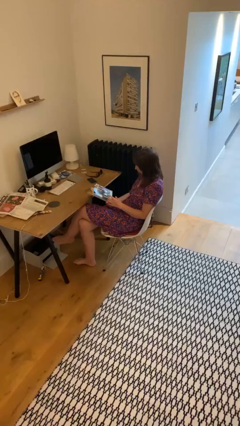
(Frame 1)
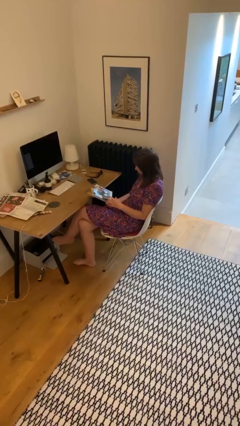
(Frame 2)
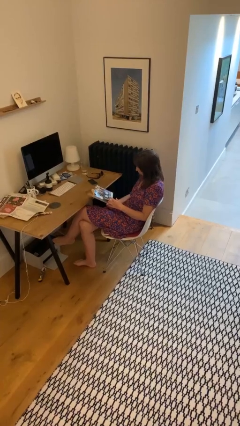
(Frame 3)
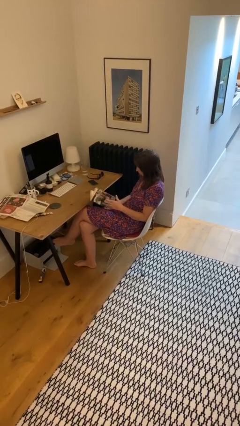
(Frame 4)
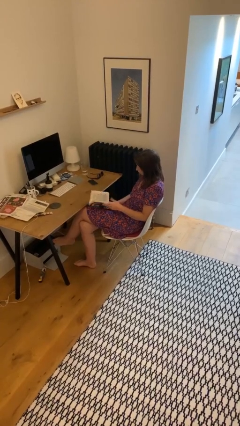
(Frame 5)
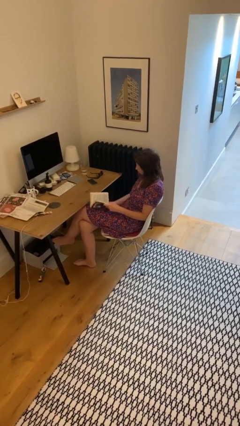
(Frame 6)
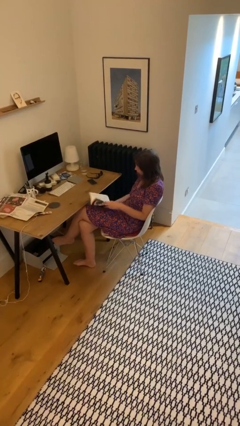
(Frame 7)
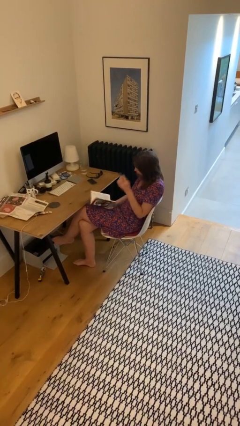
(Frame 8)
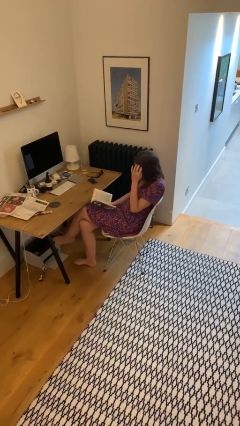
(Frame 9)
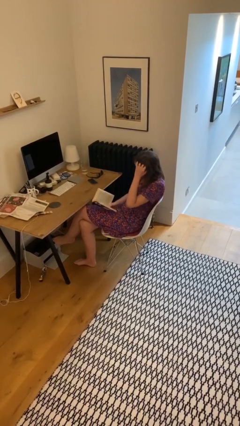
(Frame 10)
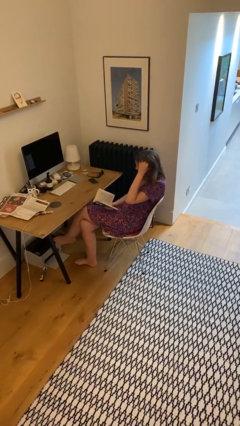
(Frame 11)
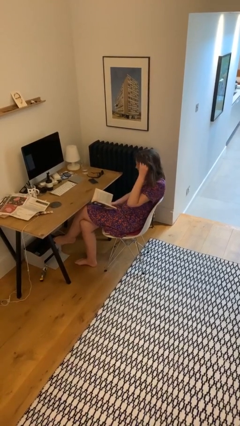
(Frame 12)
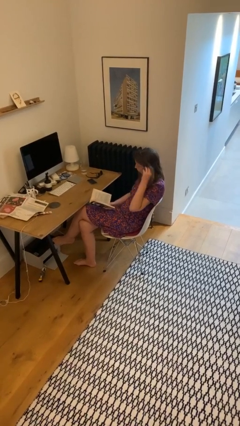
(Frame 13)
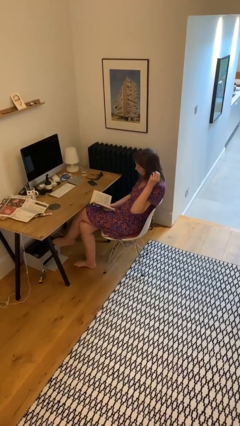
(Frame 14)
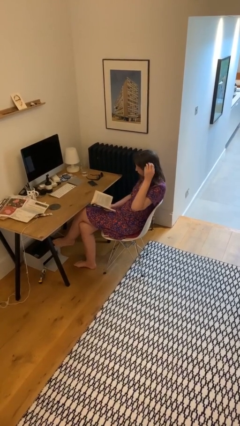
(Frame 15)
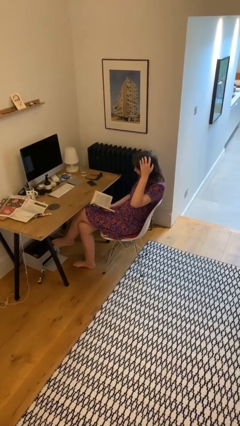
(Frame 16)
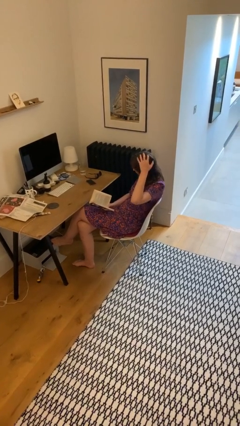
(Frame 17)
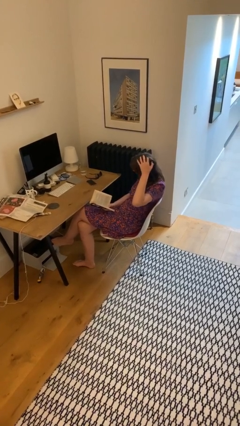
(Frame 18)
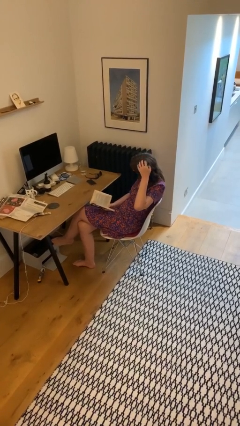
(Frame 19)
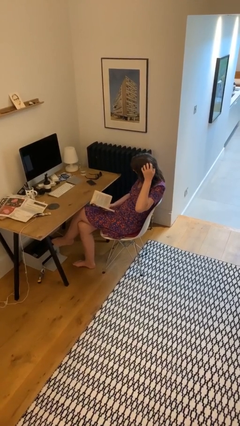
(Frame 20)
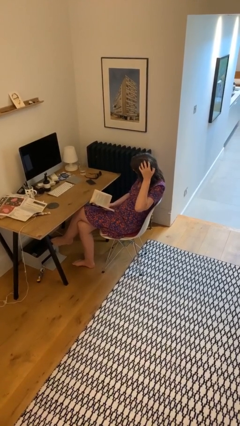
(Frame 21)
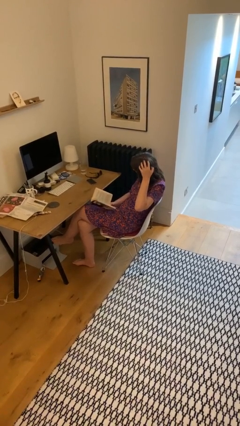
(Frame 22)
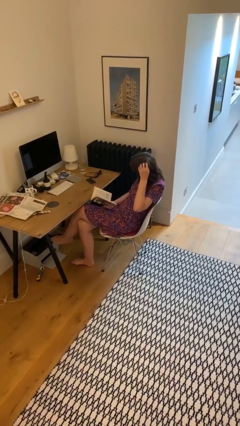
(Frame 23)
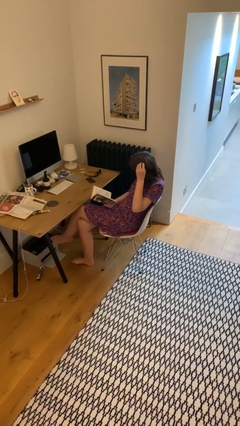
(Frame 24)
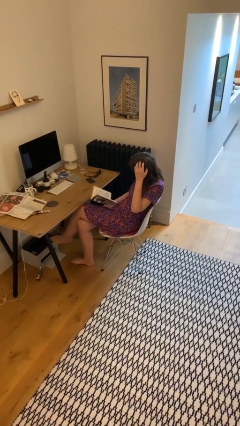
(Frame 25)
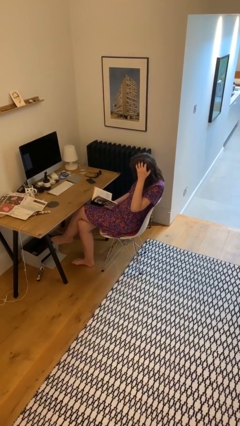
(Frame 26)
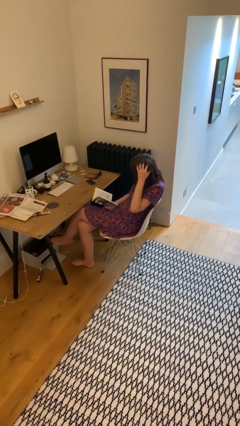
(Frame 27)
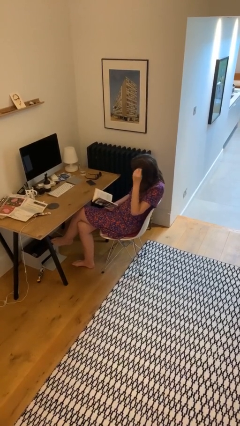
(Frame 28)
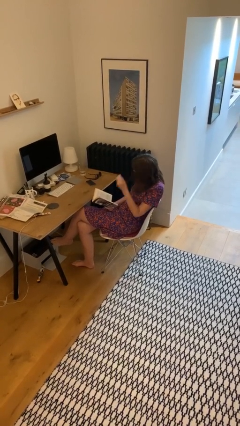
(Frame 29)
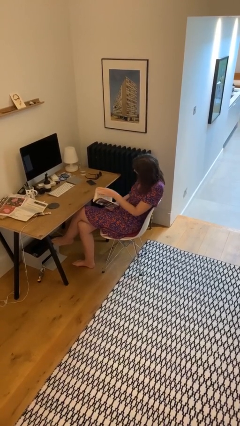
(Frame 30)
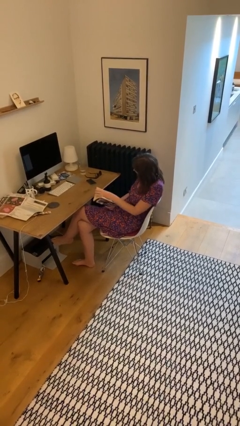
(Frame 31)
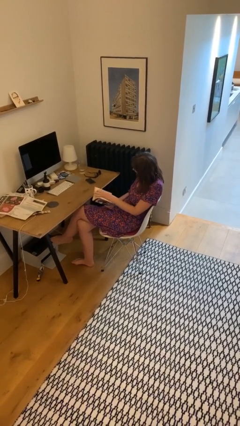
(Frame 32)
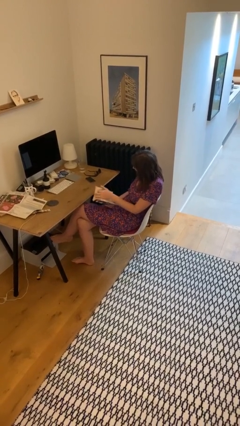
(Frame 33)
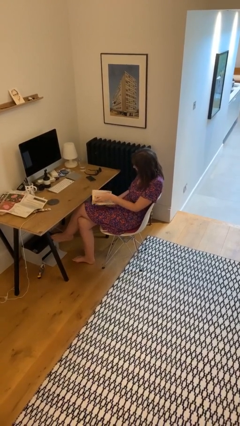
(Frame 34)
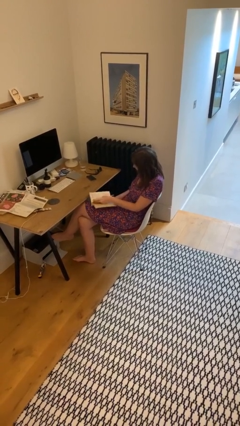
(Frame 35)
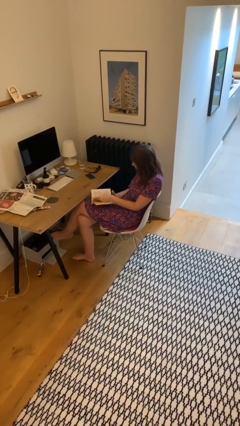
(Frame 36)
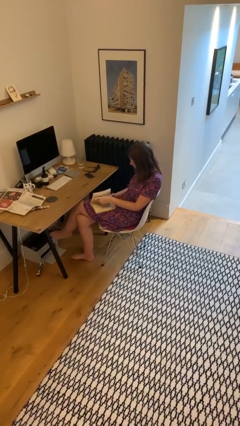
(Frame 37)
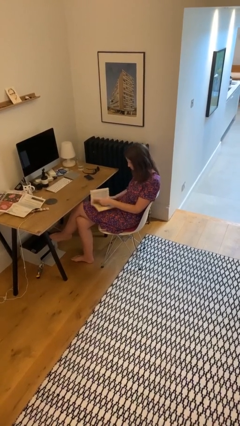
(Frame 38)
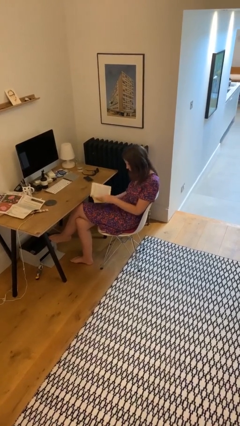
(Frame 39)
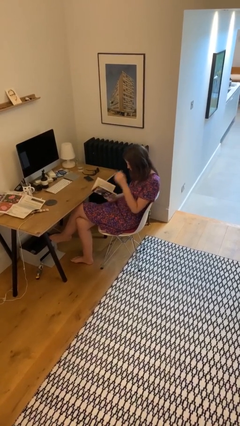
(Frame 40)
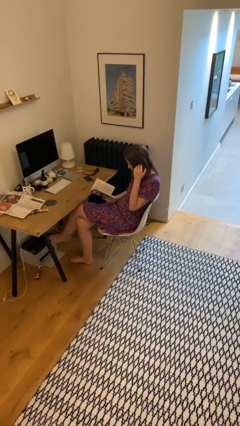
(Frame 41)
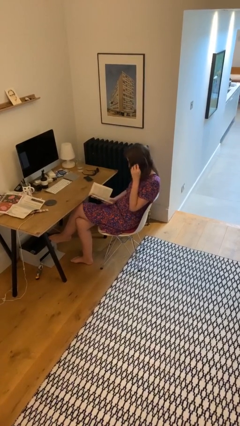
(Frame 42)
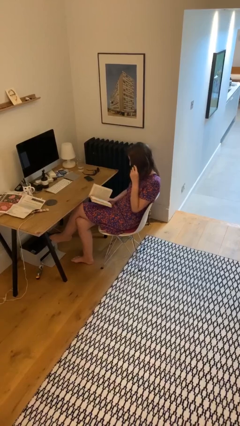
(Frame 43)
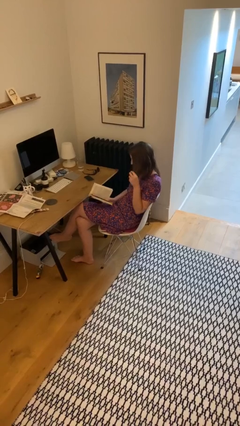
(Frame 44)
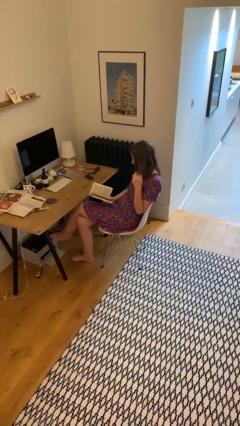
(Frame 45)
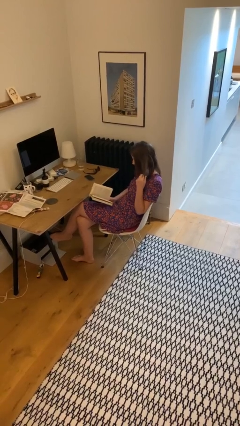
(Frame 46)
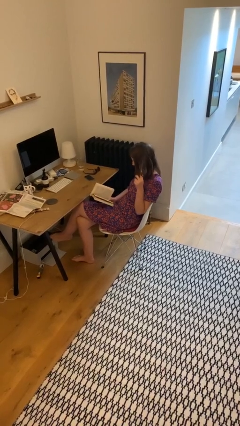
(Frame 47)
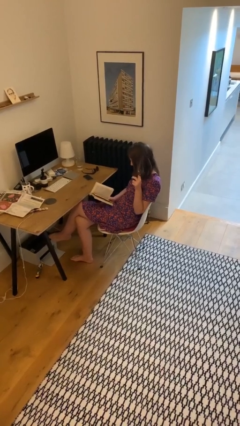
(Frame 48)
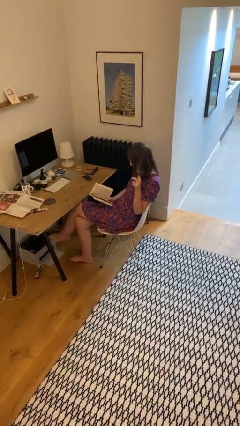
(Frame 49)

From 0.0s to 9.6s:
person reads document

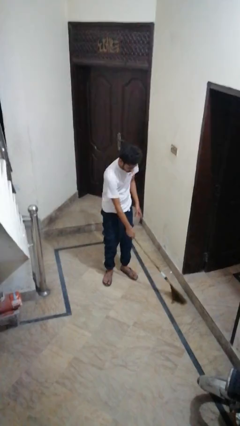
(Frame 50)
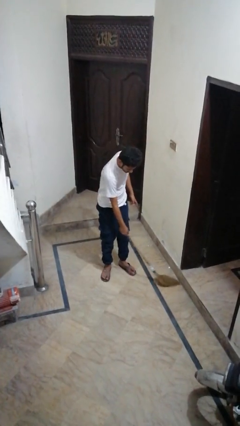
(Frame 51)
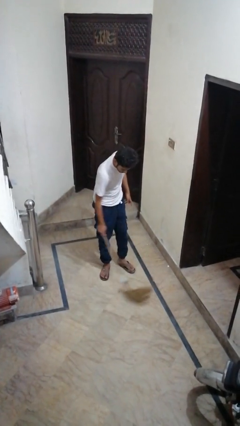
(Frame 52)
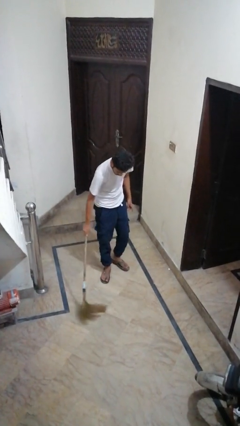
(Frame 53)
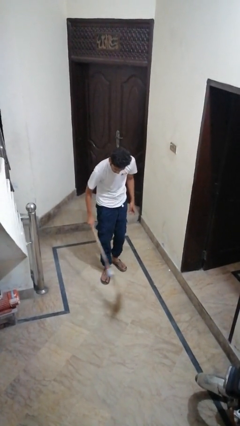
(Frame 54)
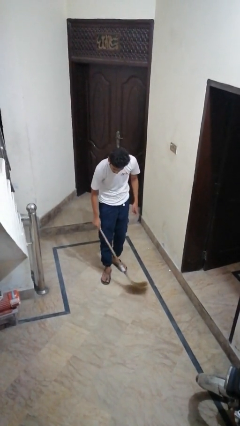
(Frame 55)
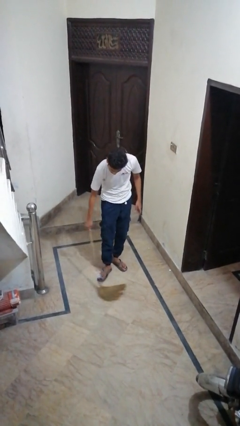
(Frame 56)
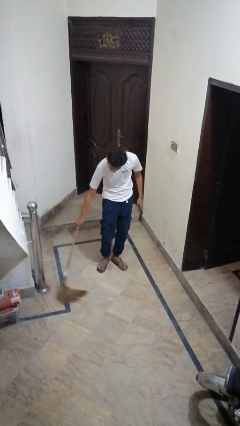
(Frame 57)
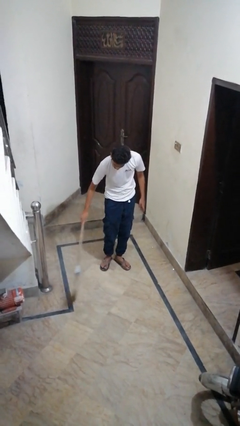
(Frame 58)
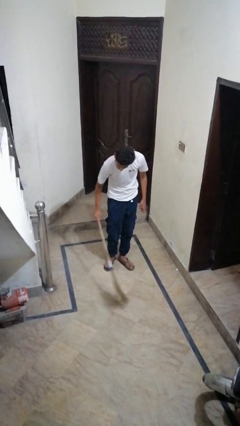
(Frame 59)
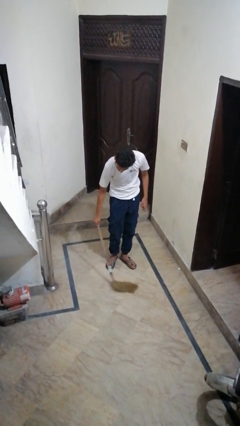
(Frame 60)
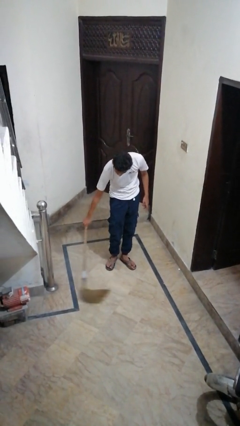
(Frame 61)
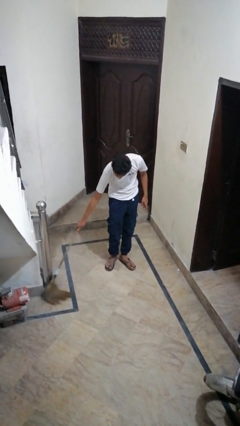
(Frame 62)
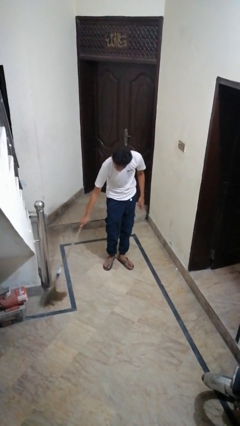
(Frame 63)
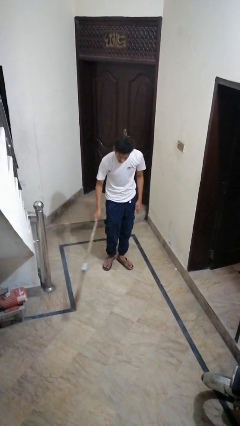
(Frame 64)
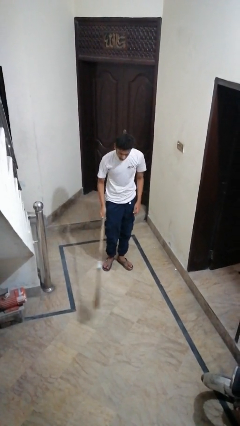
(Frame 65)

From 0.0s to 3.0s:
person sweeps floor

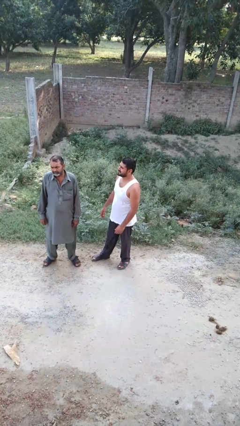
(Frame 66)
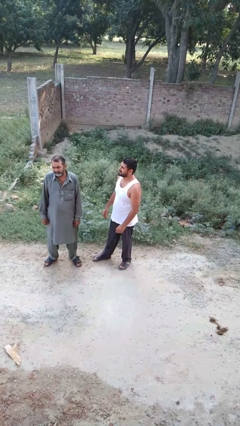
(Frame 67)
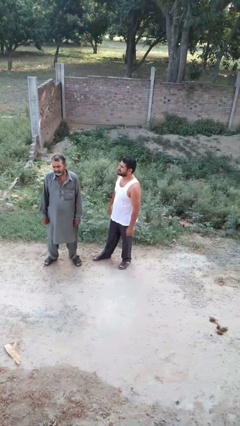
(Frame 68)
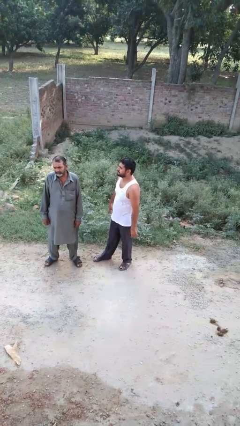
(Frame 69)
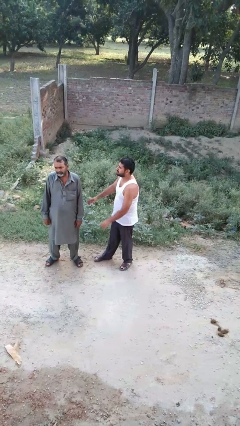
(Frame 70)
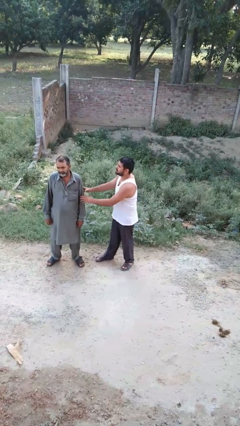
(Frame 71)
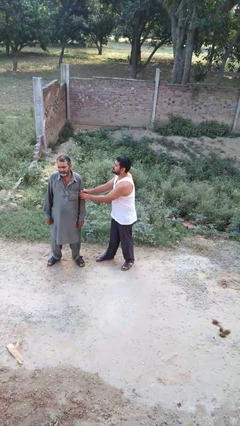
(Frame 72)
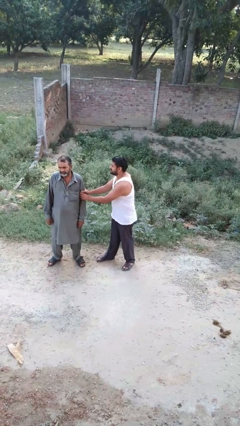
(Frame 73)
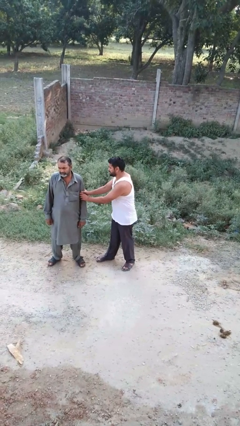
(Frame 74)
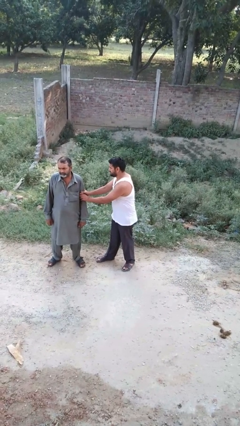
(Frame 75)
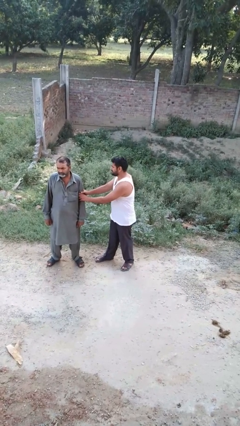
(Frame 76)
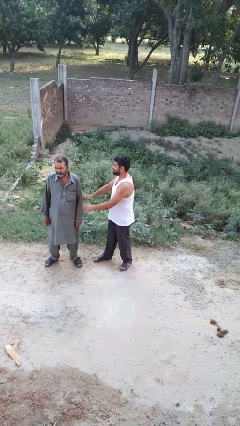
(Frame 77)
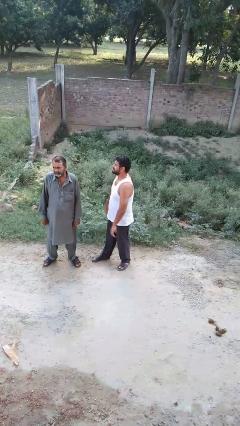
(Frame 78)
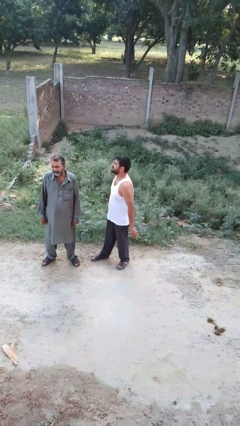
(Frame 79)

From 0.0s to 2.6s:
person grabs person by forearm

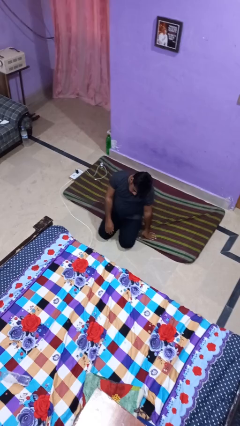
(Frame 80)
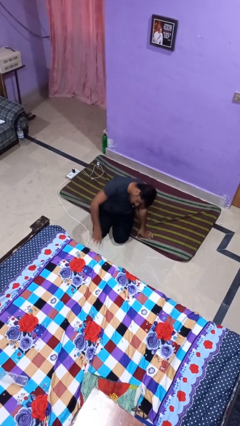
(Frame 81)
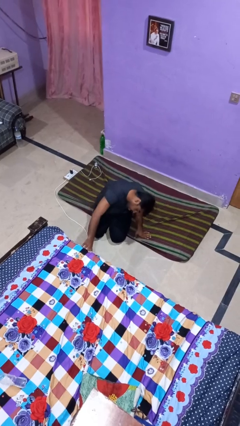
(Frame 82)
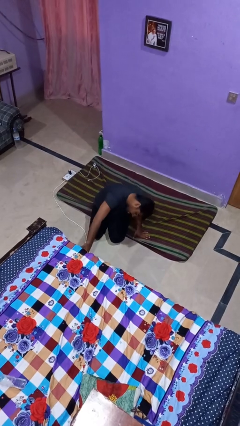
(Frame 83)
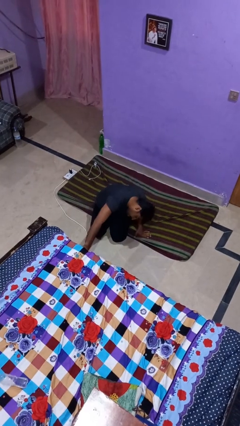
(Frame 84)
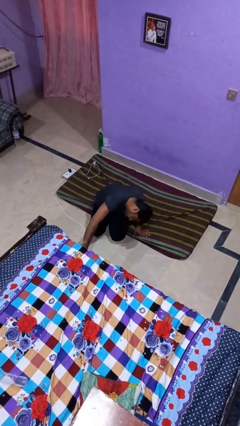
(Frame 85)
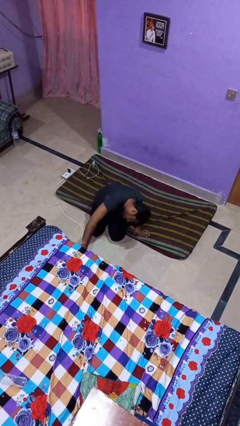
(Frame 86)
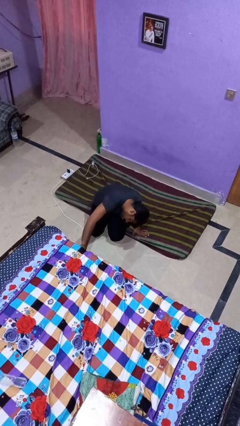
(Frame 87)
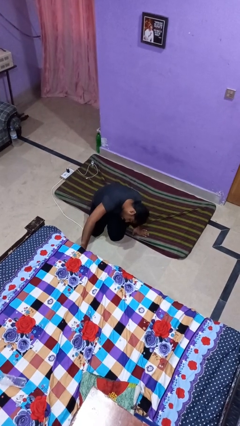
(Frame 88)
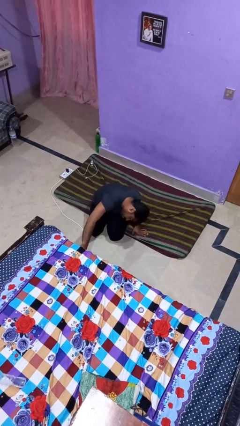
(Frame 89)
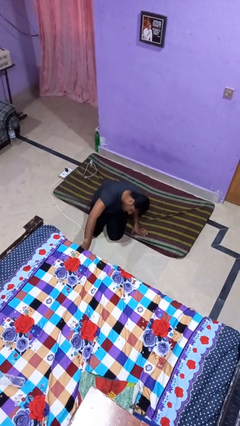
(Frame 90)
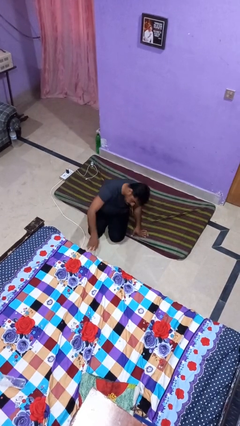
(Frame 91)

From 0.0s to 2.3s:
person searches under bed

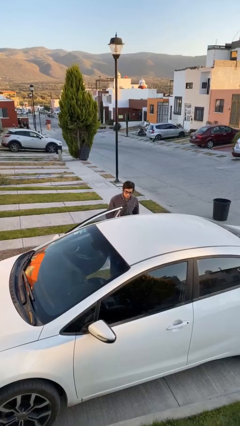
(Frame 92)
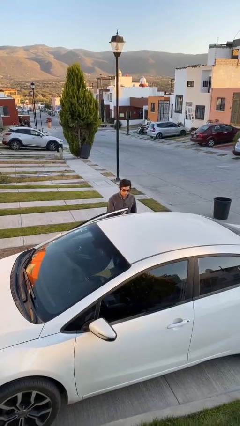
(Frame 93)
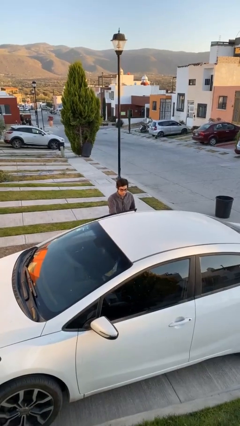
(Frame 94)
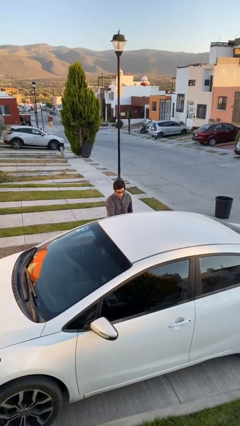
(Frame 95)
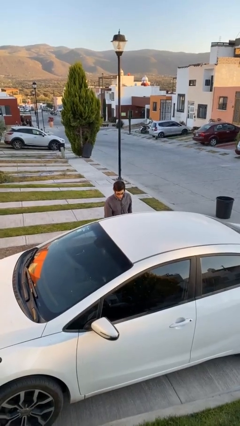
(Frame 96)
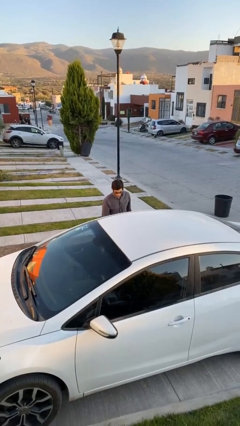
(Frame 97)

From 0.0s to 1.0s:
person closes car door
